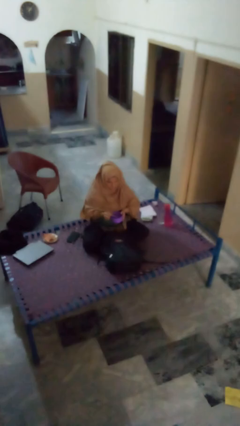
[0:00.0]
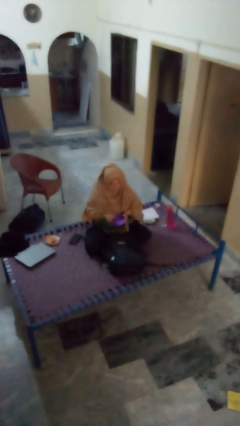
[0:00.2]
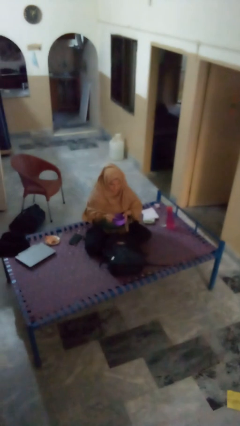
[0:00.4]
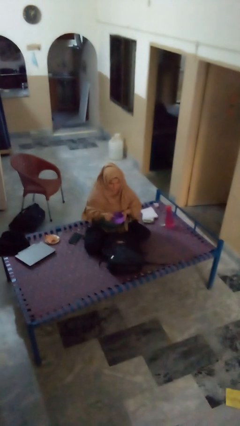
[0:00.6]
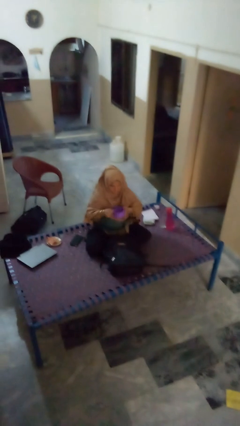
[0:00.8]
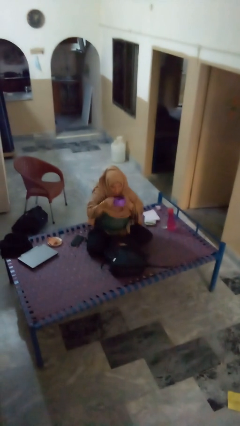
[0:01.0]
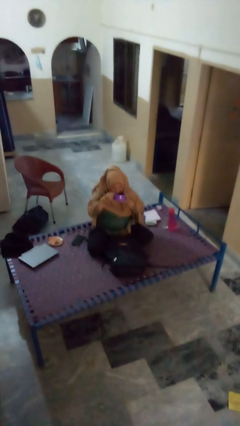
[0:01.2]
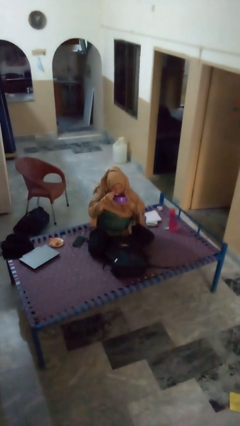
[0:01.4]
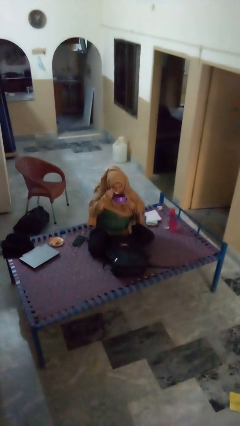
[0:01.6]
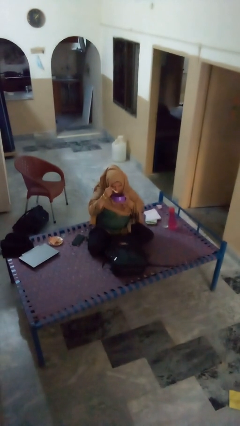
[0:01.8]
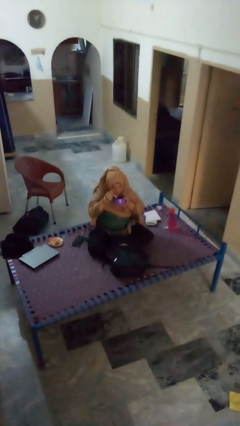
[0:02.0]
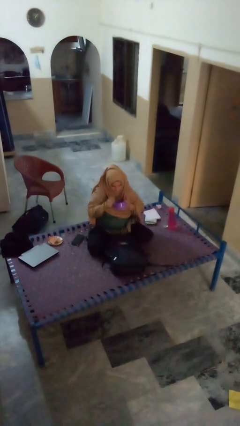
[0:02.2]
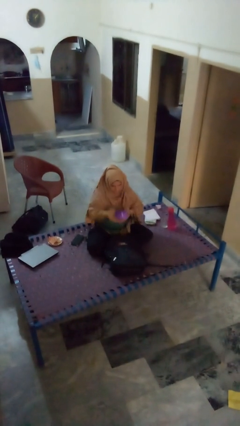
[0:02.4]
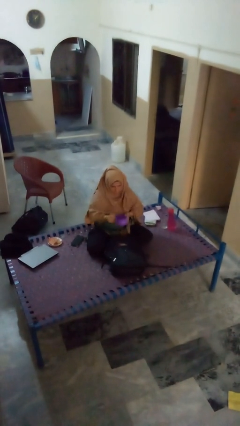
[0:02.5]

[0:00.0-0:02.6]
person eats snack from bag

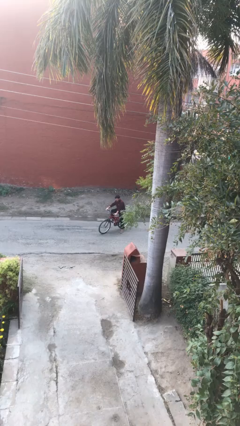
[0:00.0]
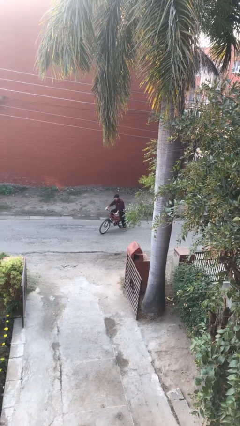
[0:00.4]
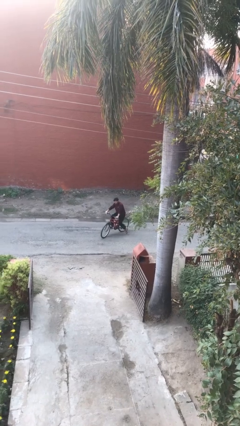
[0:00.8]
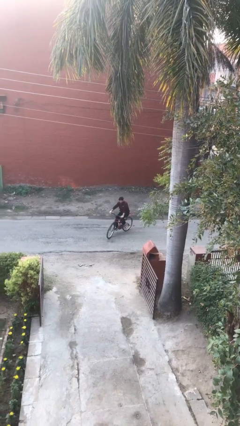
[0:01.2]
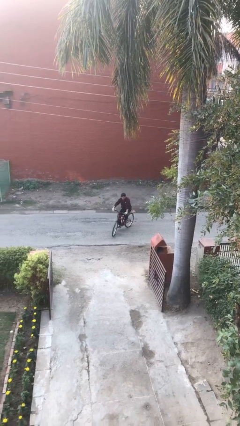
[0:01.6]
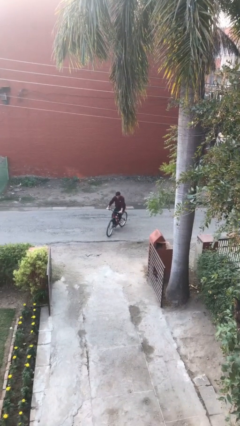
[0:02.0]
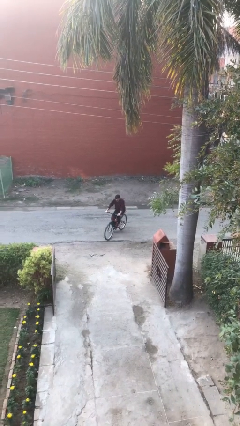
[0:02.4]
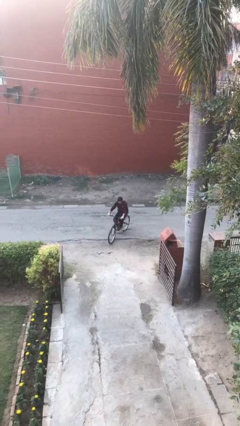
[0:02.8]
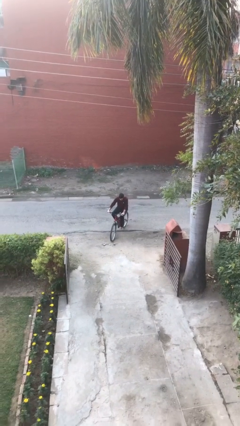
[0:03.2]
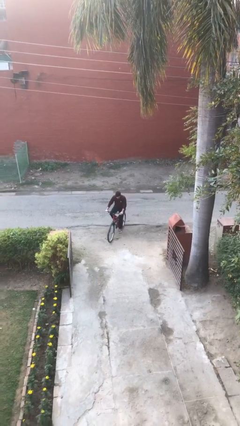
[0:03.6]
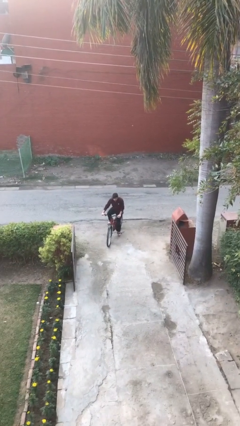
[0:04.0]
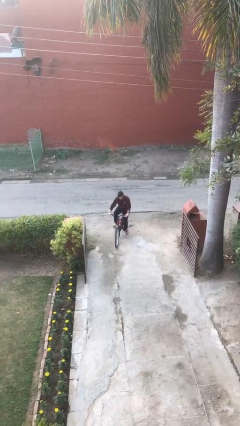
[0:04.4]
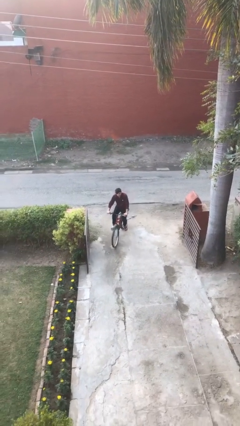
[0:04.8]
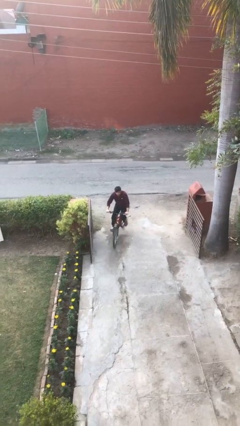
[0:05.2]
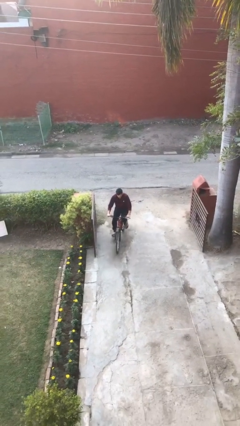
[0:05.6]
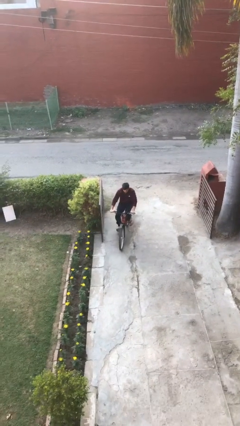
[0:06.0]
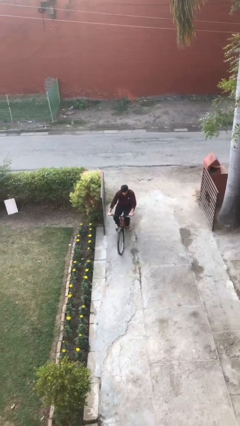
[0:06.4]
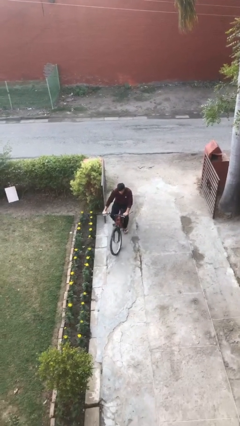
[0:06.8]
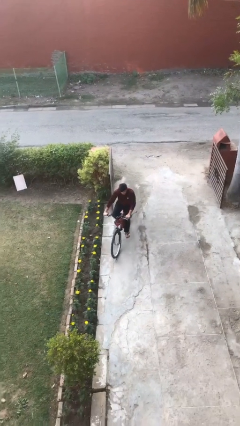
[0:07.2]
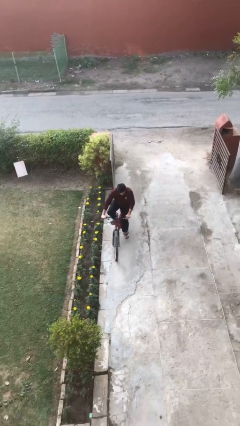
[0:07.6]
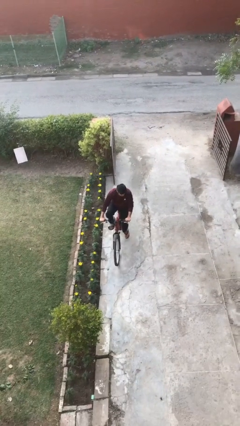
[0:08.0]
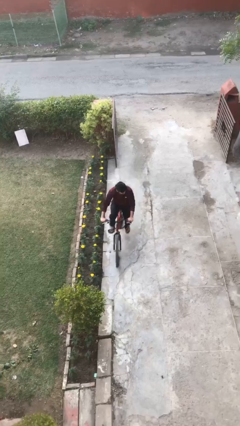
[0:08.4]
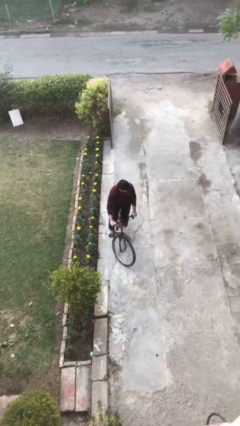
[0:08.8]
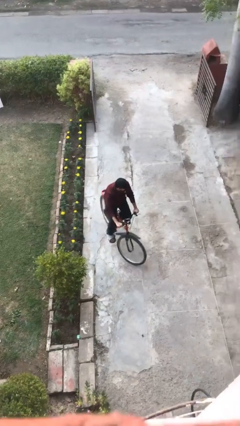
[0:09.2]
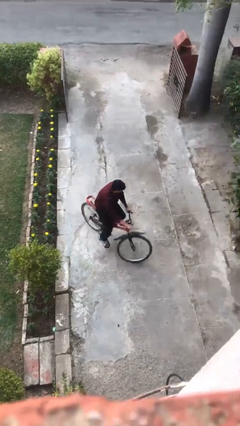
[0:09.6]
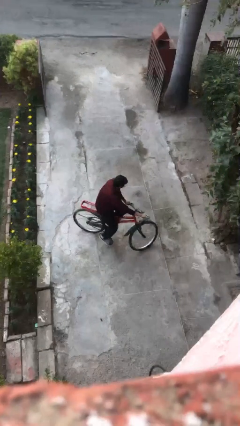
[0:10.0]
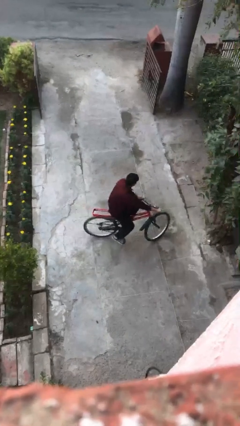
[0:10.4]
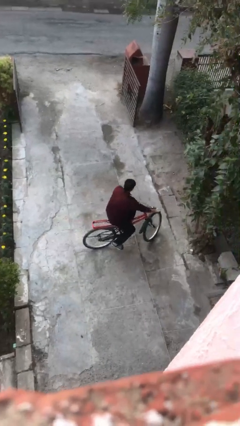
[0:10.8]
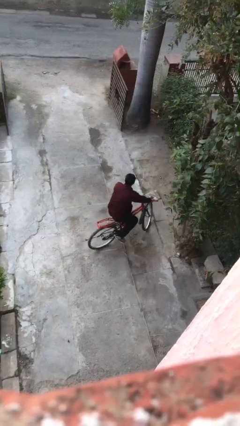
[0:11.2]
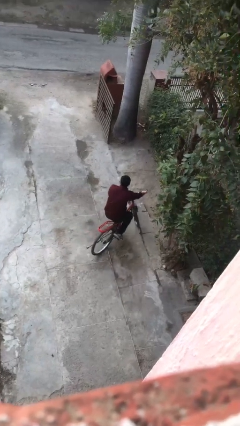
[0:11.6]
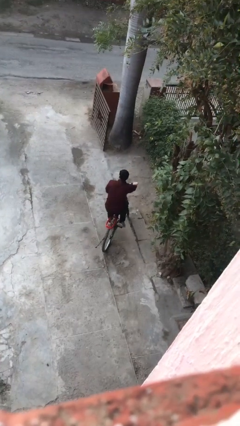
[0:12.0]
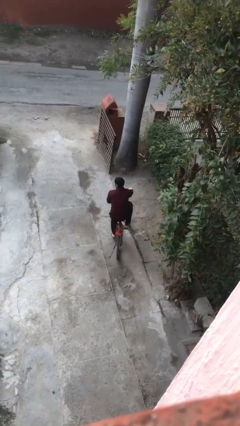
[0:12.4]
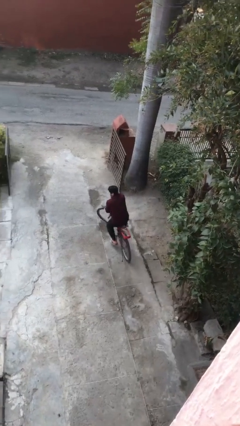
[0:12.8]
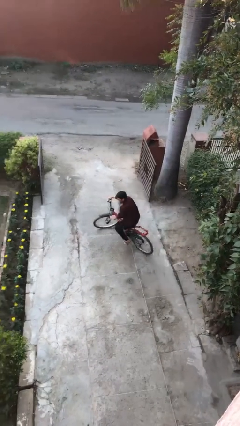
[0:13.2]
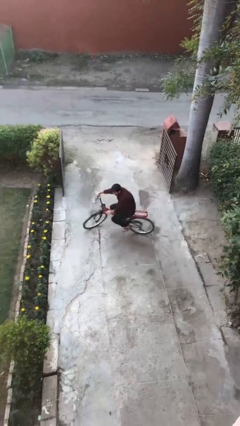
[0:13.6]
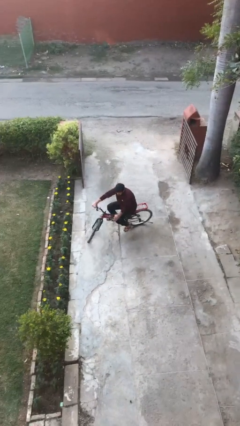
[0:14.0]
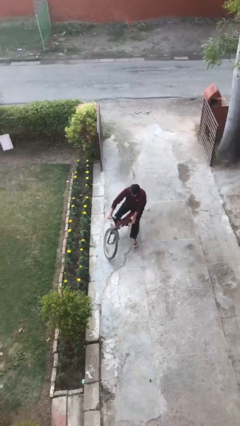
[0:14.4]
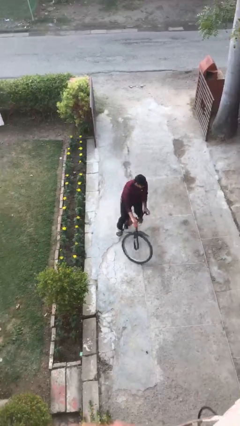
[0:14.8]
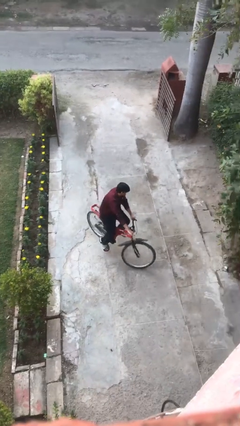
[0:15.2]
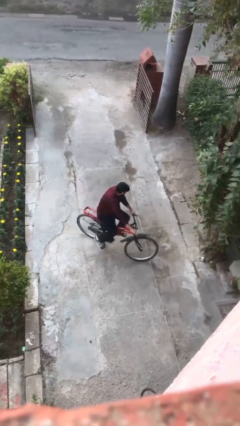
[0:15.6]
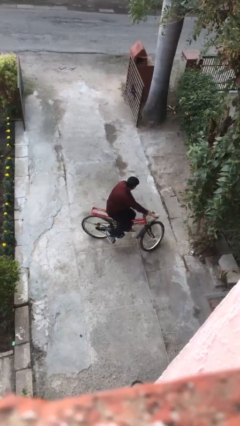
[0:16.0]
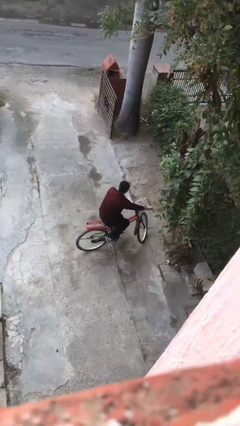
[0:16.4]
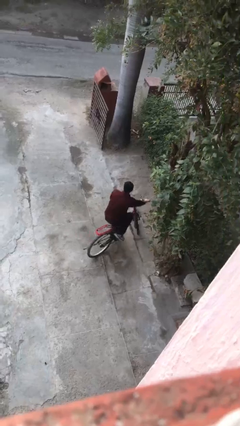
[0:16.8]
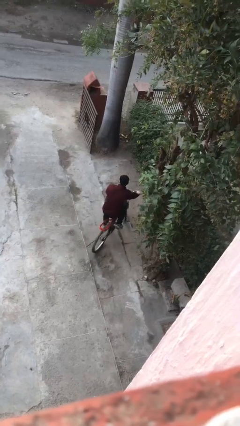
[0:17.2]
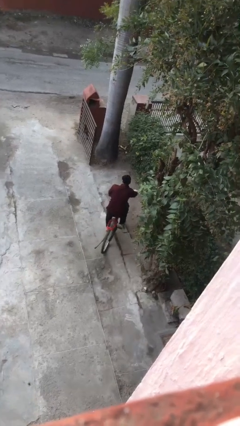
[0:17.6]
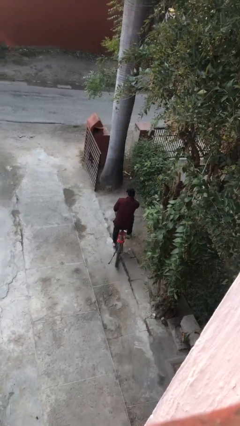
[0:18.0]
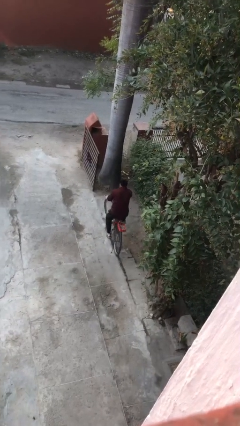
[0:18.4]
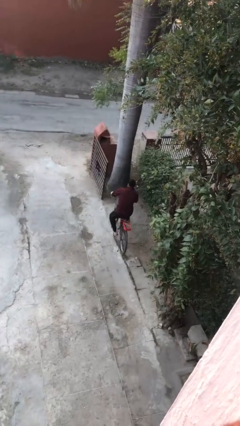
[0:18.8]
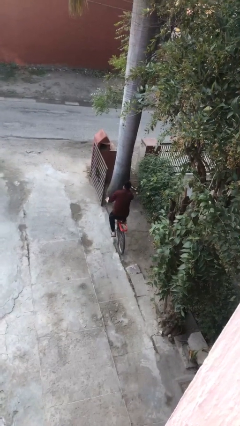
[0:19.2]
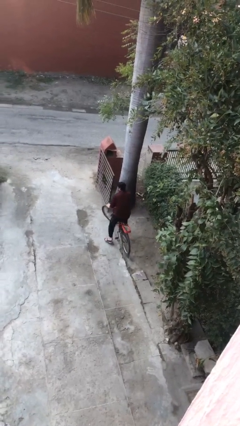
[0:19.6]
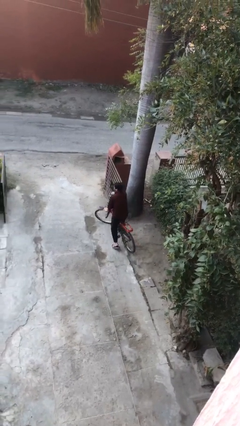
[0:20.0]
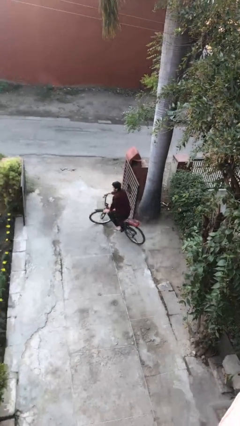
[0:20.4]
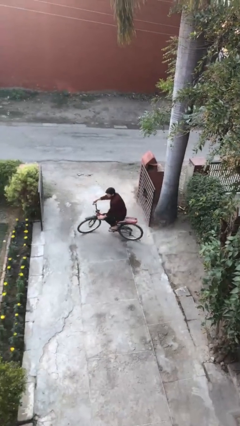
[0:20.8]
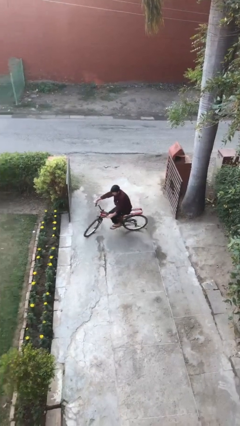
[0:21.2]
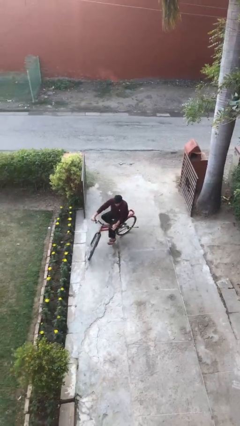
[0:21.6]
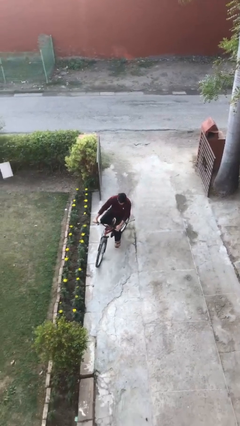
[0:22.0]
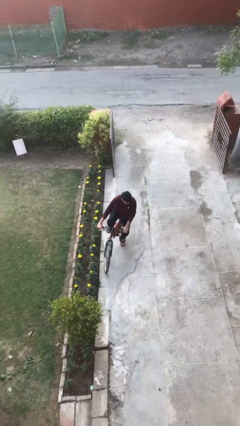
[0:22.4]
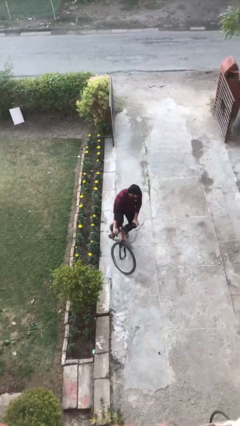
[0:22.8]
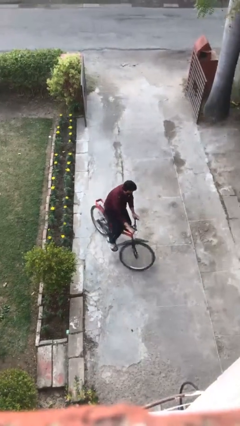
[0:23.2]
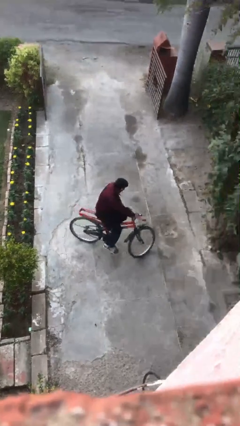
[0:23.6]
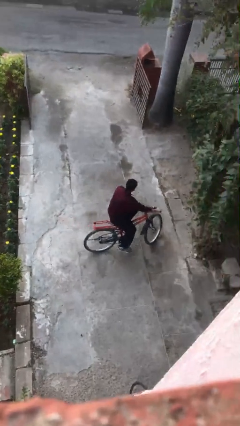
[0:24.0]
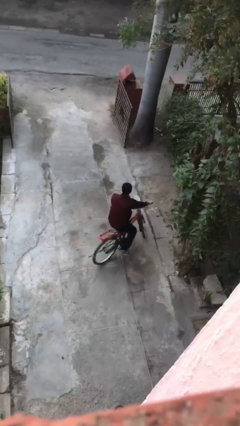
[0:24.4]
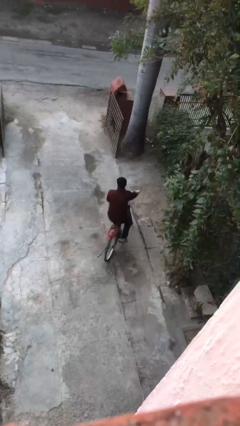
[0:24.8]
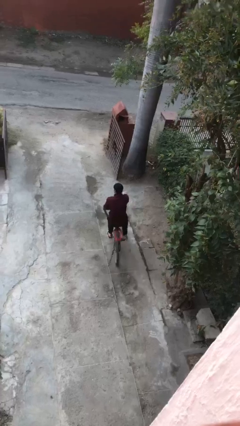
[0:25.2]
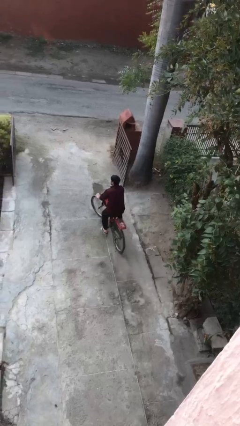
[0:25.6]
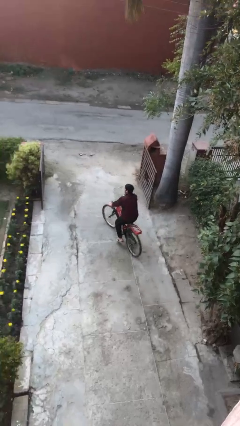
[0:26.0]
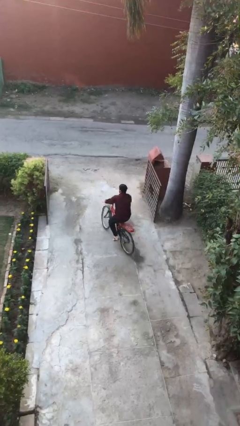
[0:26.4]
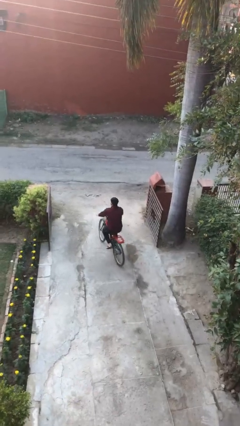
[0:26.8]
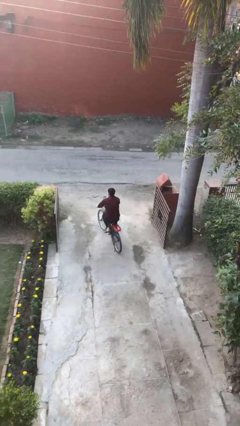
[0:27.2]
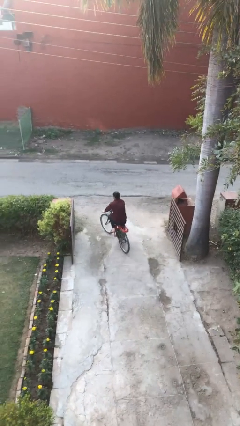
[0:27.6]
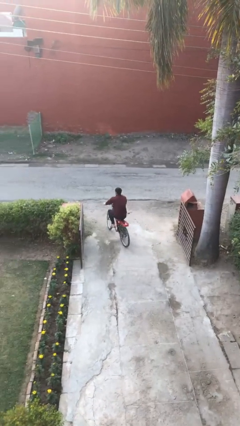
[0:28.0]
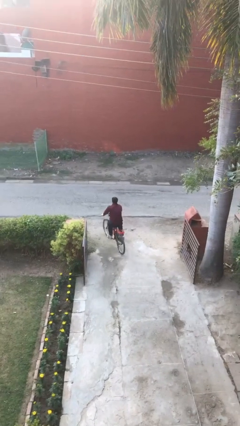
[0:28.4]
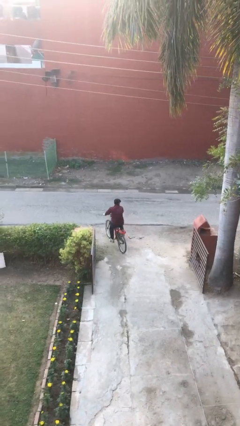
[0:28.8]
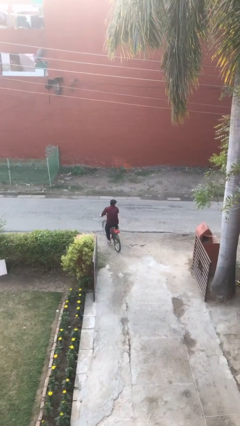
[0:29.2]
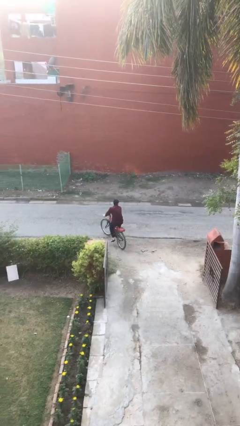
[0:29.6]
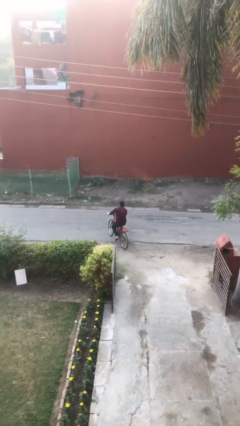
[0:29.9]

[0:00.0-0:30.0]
person rides bicycle

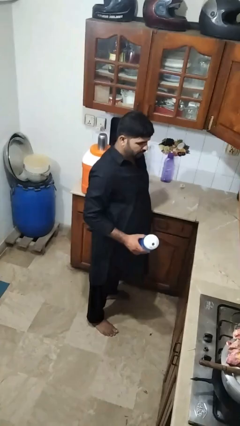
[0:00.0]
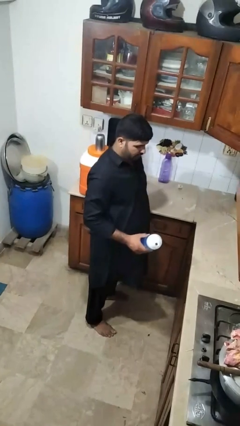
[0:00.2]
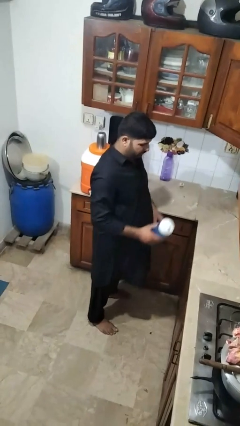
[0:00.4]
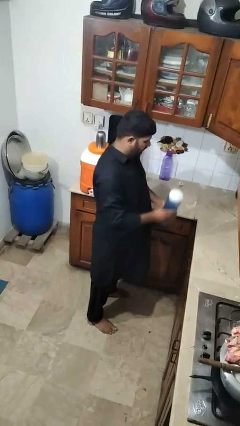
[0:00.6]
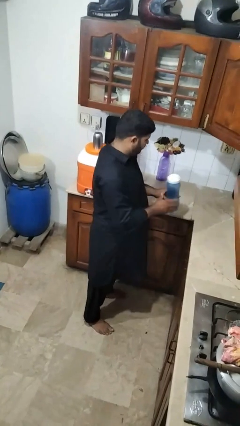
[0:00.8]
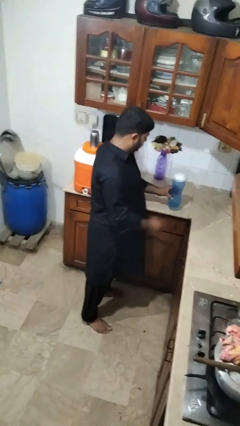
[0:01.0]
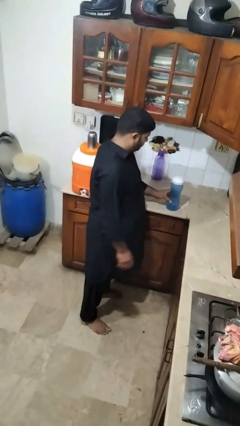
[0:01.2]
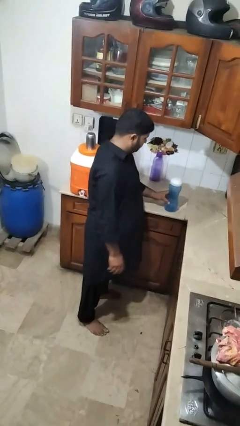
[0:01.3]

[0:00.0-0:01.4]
person puts down object on countertop
